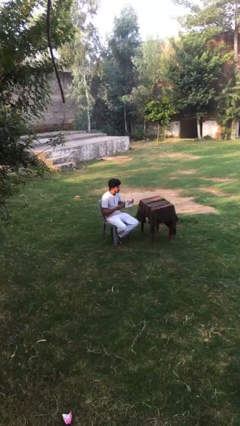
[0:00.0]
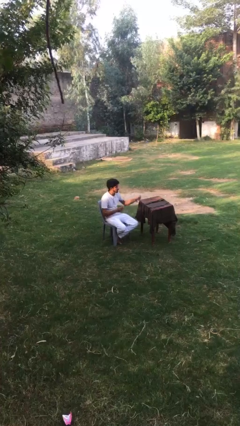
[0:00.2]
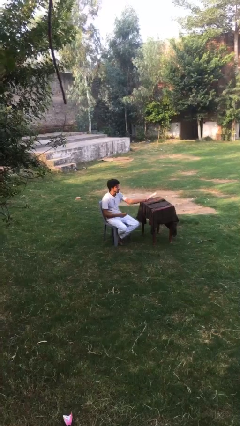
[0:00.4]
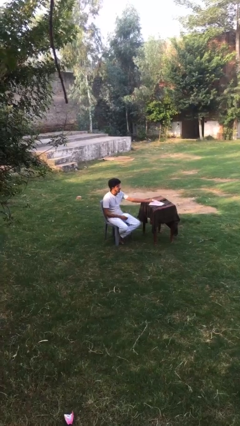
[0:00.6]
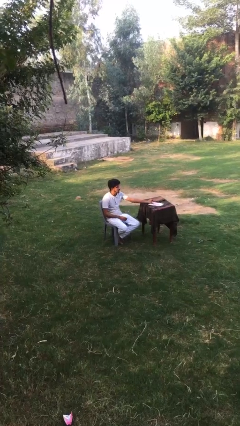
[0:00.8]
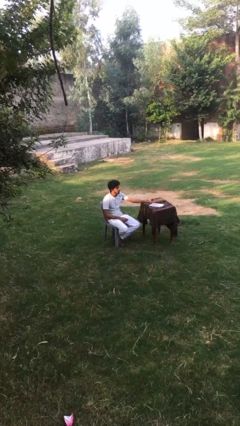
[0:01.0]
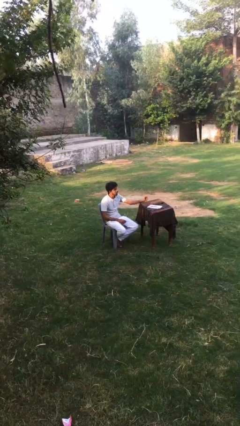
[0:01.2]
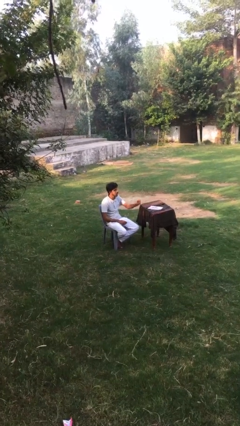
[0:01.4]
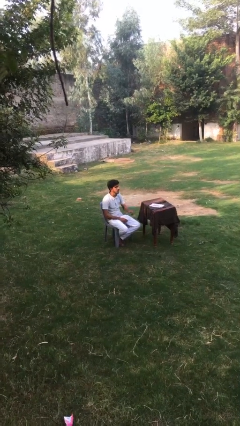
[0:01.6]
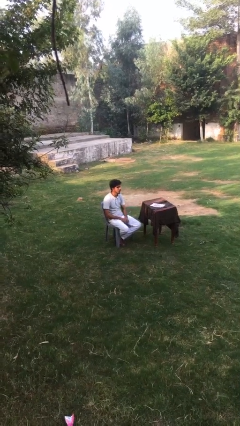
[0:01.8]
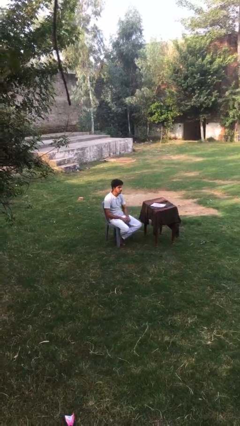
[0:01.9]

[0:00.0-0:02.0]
person puts down object on table

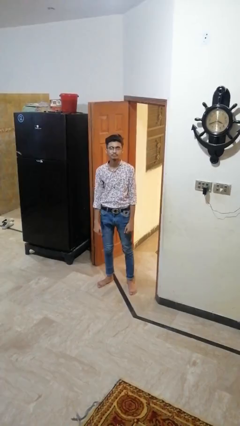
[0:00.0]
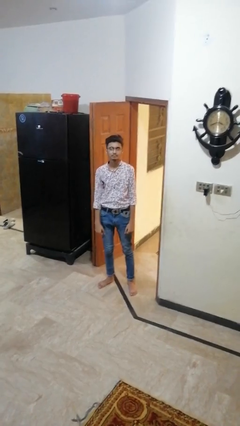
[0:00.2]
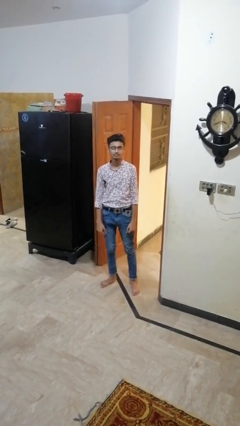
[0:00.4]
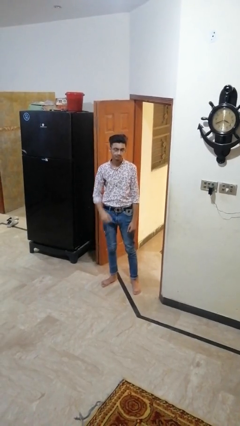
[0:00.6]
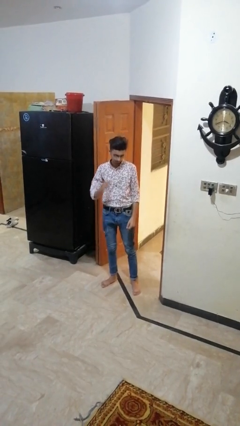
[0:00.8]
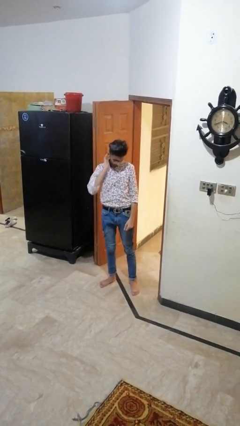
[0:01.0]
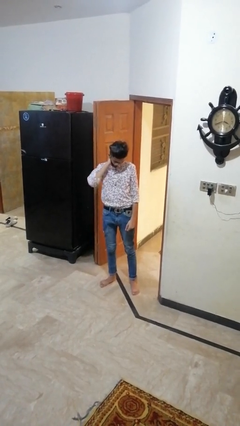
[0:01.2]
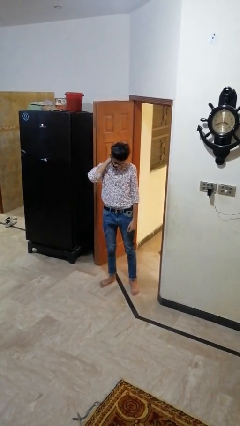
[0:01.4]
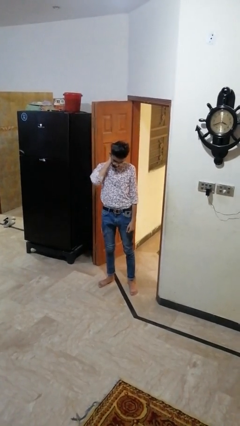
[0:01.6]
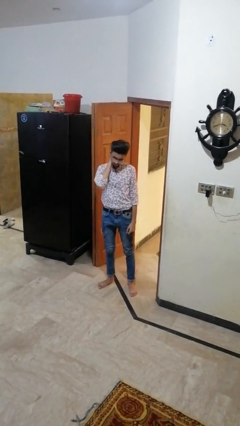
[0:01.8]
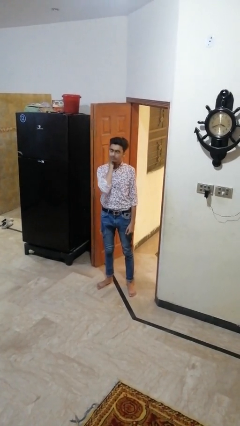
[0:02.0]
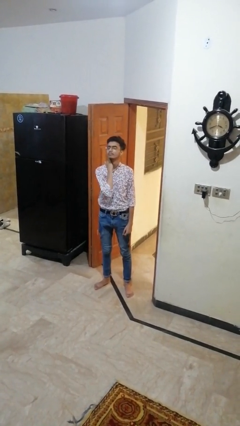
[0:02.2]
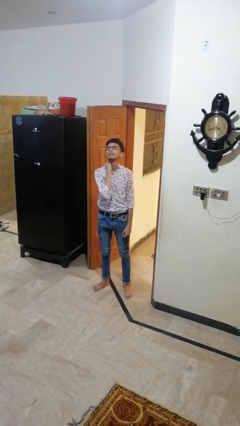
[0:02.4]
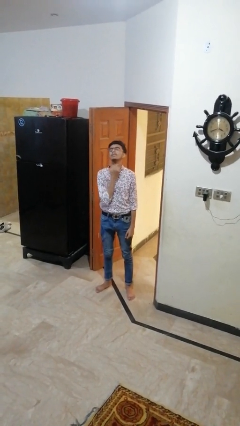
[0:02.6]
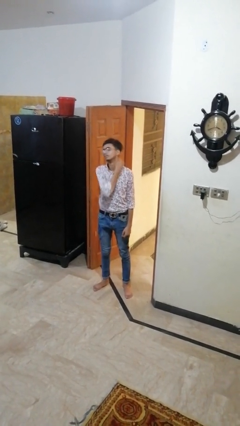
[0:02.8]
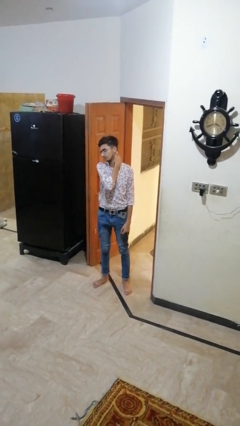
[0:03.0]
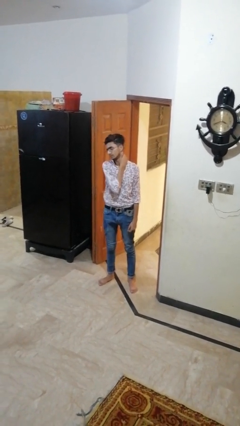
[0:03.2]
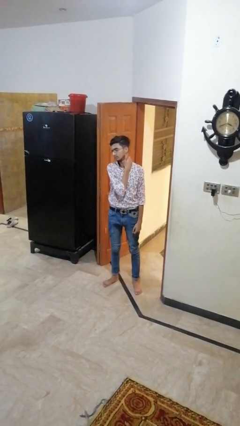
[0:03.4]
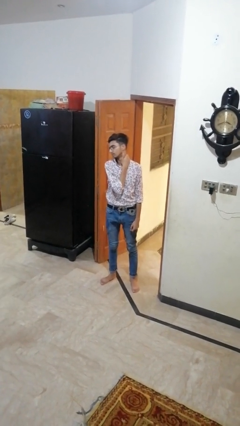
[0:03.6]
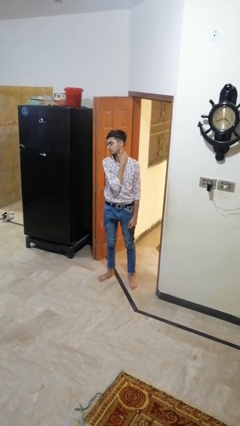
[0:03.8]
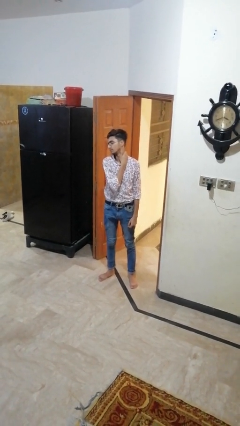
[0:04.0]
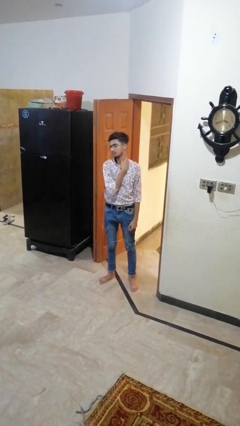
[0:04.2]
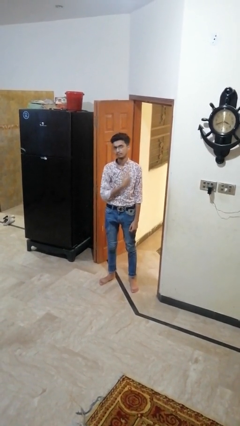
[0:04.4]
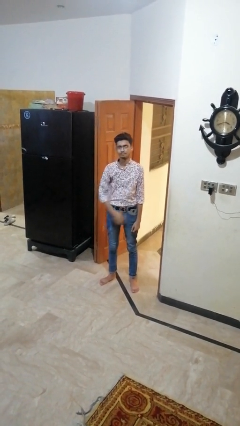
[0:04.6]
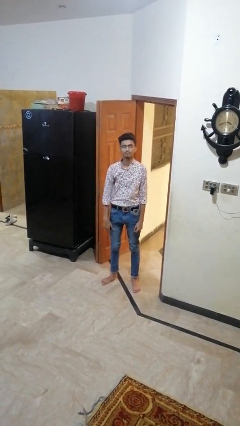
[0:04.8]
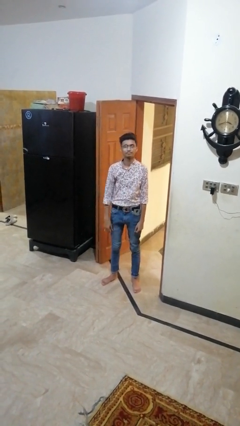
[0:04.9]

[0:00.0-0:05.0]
person rubs neck

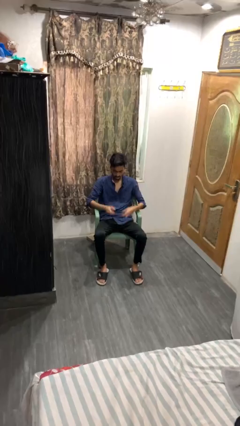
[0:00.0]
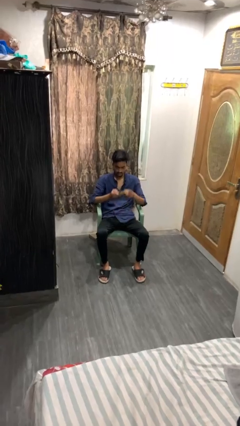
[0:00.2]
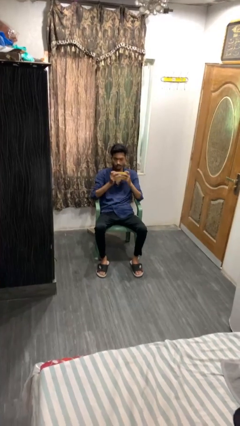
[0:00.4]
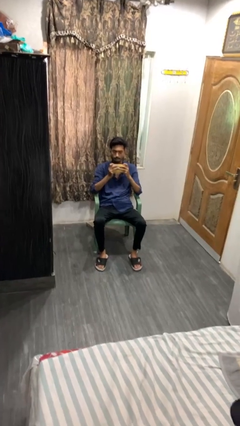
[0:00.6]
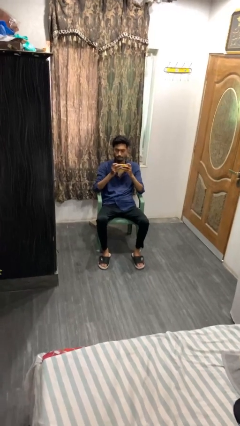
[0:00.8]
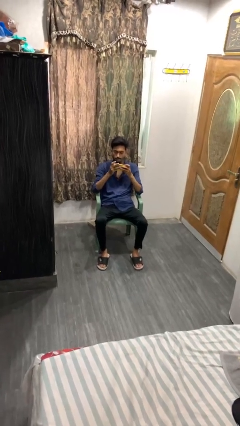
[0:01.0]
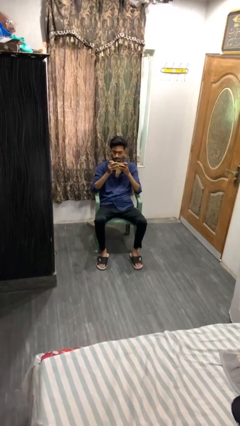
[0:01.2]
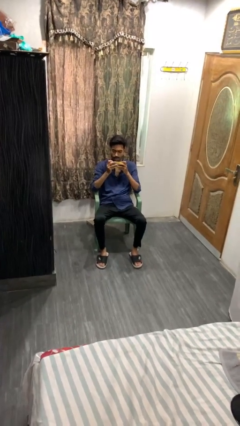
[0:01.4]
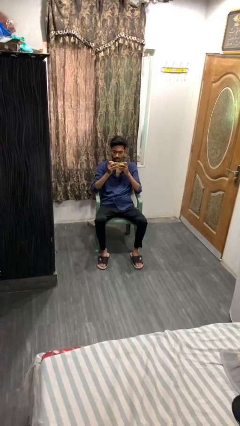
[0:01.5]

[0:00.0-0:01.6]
person interacts with handheld game

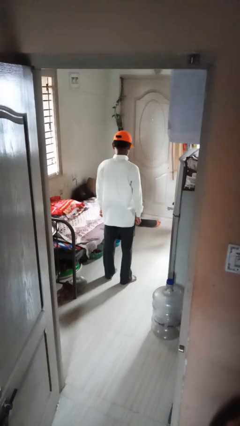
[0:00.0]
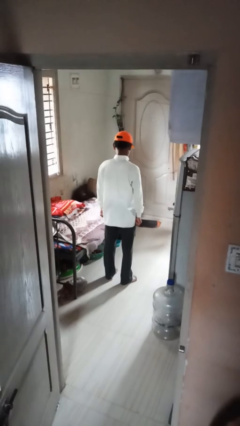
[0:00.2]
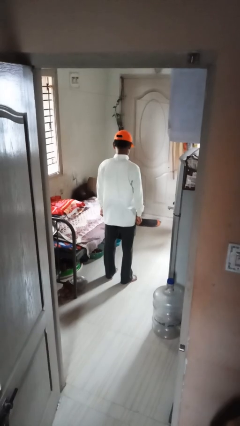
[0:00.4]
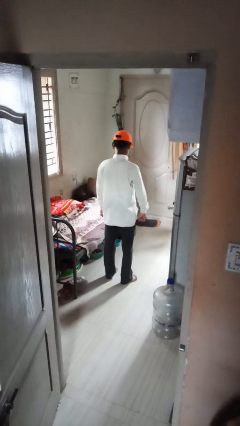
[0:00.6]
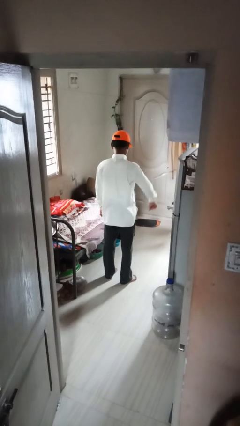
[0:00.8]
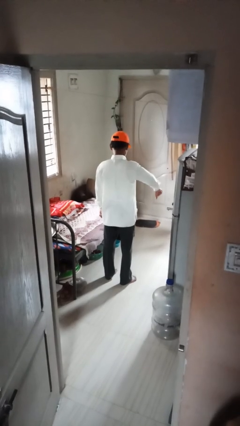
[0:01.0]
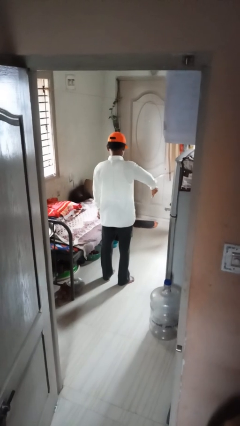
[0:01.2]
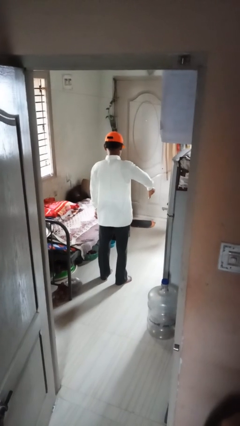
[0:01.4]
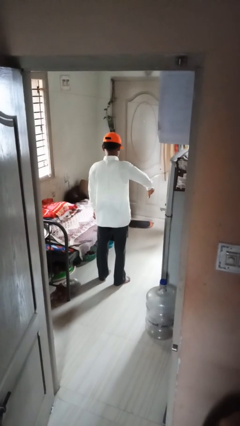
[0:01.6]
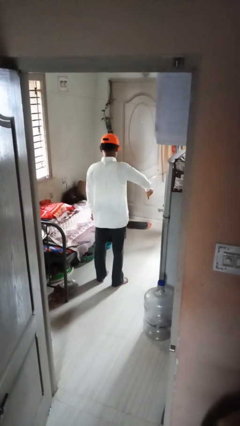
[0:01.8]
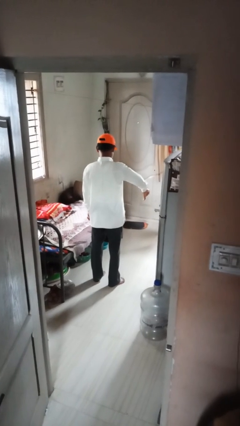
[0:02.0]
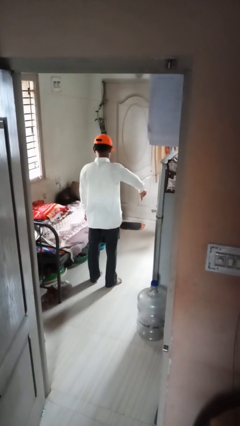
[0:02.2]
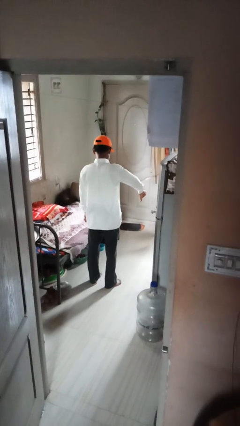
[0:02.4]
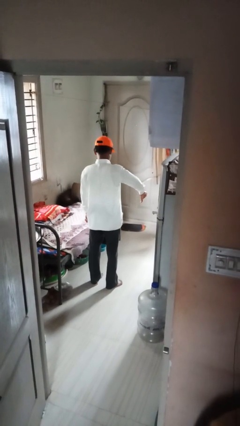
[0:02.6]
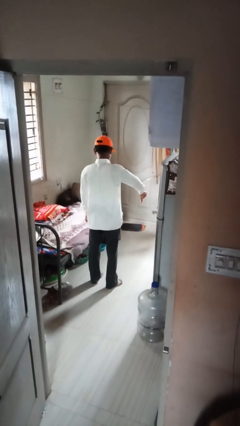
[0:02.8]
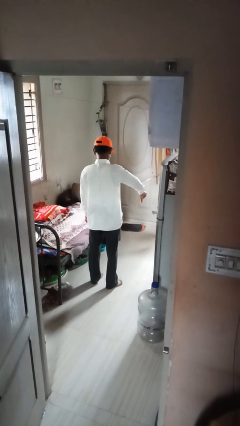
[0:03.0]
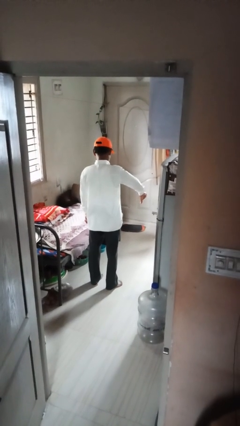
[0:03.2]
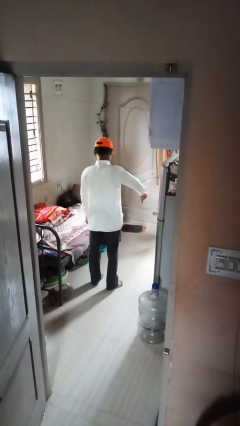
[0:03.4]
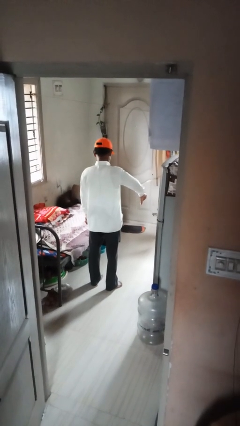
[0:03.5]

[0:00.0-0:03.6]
person gestures thumbs down

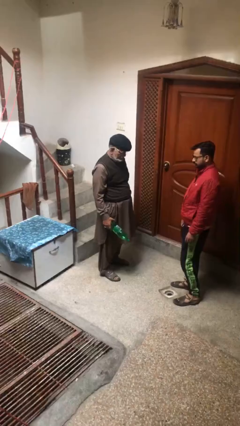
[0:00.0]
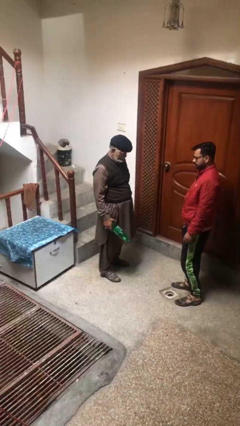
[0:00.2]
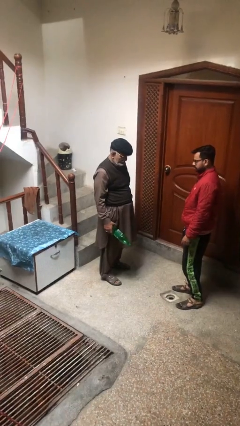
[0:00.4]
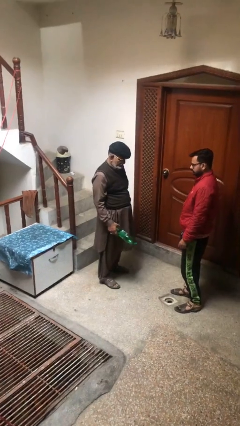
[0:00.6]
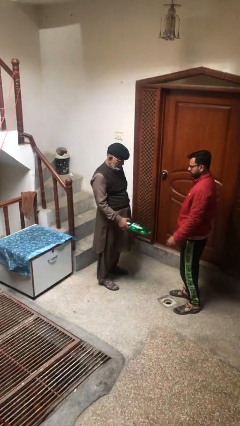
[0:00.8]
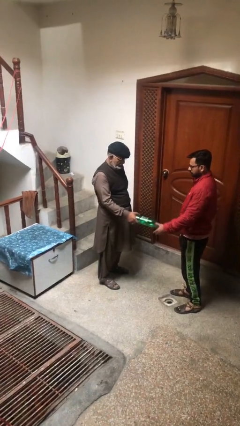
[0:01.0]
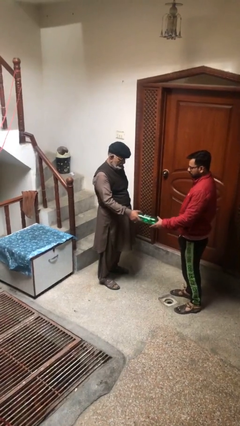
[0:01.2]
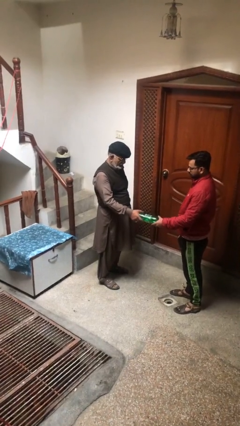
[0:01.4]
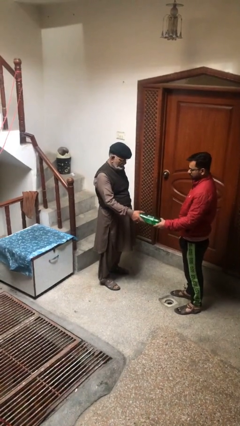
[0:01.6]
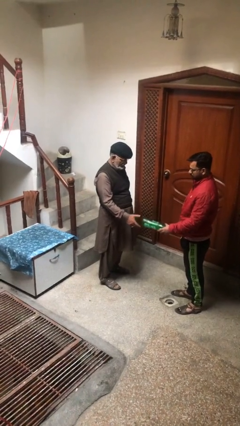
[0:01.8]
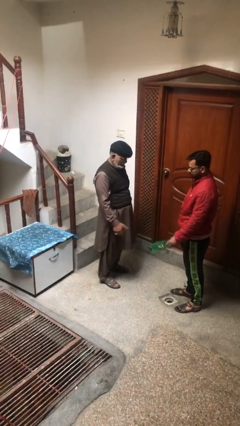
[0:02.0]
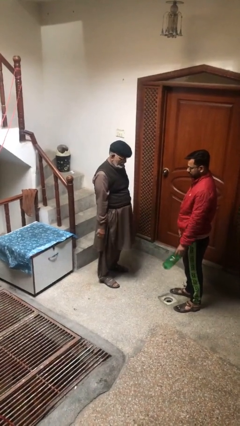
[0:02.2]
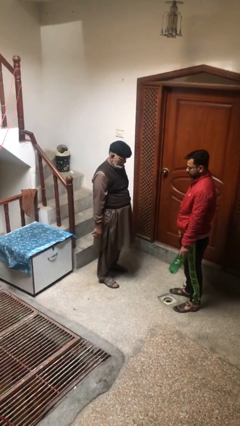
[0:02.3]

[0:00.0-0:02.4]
person transfers object to person

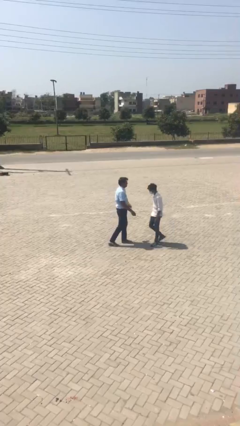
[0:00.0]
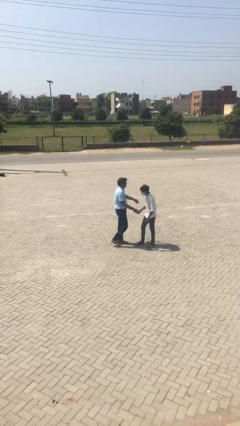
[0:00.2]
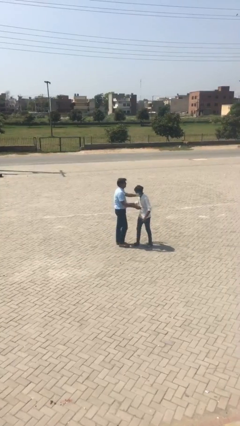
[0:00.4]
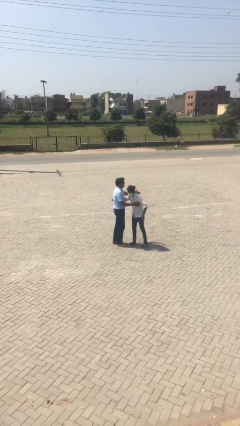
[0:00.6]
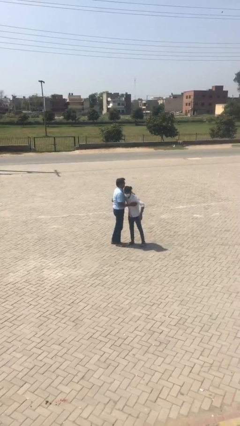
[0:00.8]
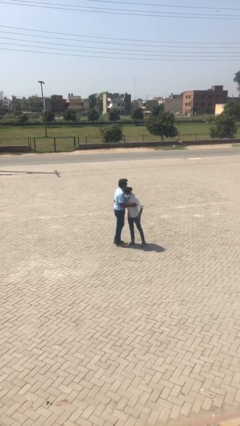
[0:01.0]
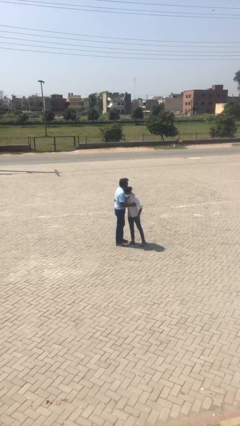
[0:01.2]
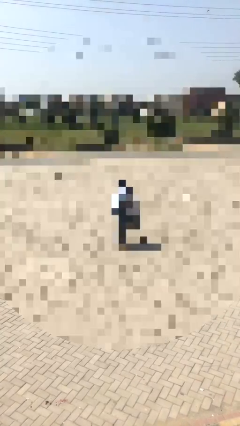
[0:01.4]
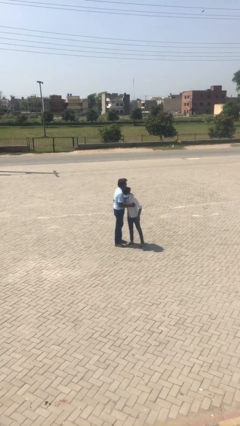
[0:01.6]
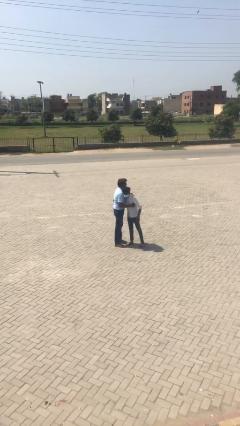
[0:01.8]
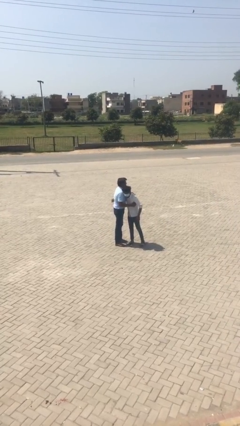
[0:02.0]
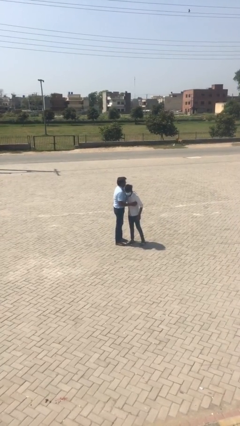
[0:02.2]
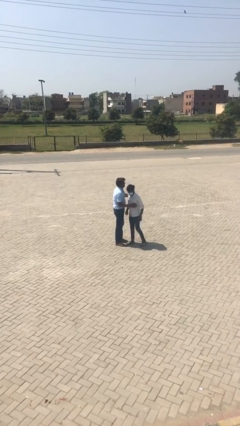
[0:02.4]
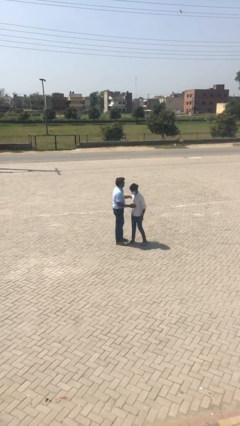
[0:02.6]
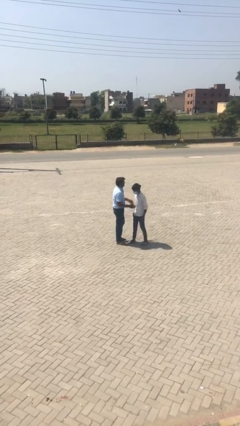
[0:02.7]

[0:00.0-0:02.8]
person embraces person

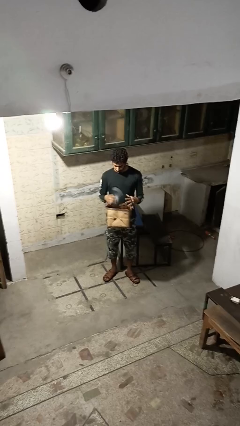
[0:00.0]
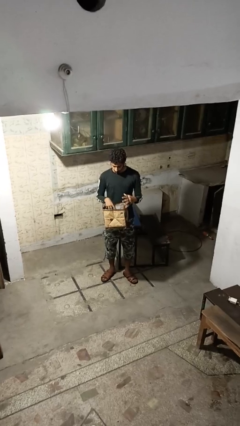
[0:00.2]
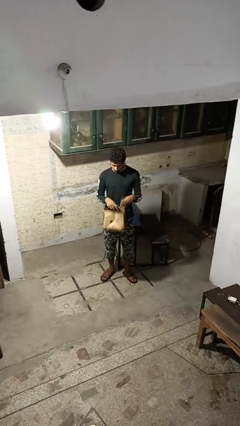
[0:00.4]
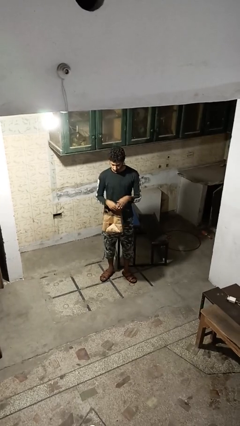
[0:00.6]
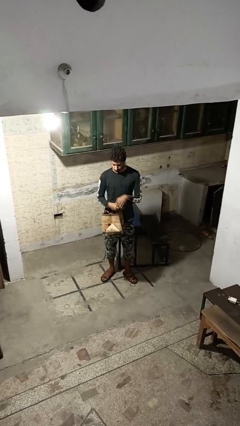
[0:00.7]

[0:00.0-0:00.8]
person puts object into purse
